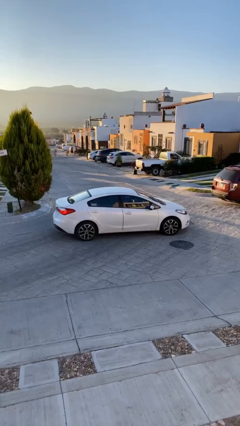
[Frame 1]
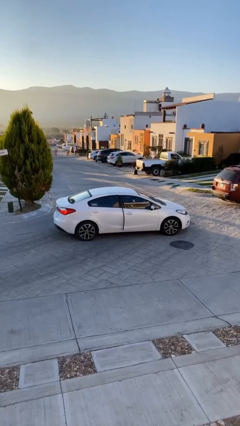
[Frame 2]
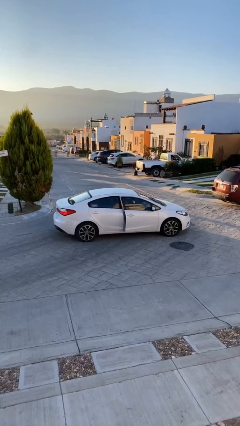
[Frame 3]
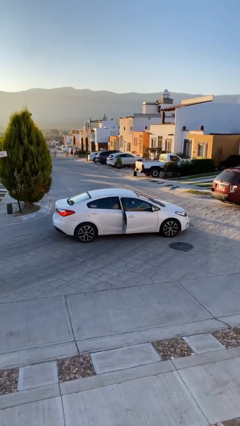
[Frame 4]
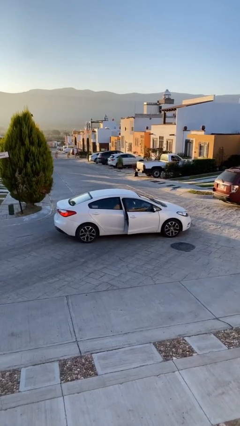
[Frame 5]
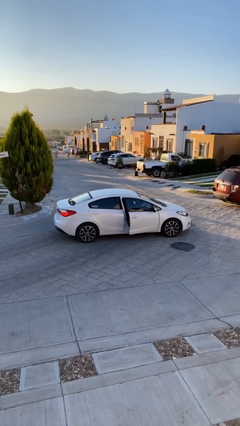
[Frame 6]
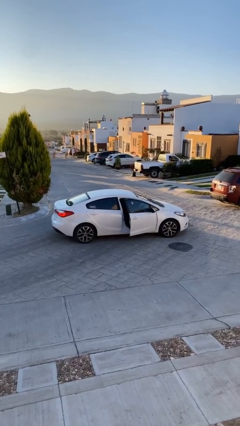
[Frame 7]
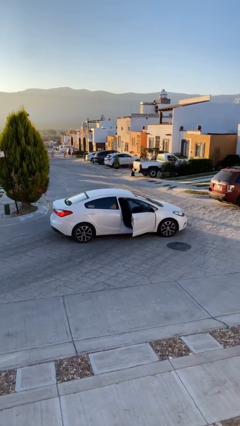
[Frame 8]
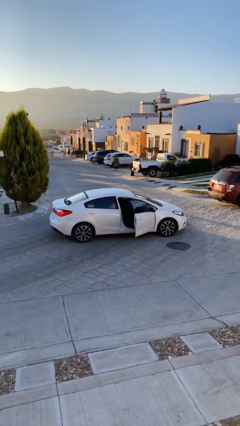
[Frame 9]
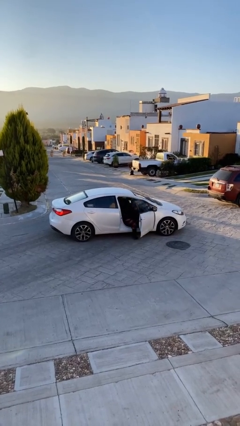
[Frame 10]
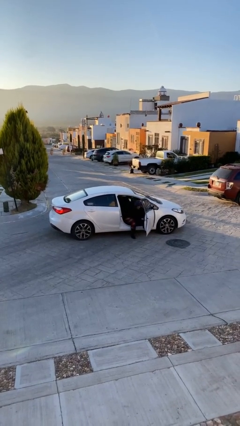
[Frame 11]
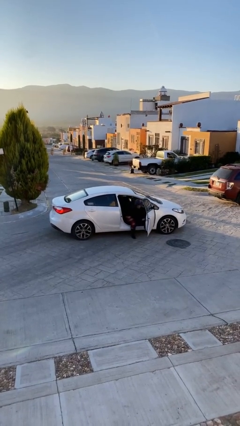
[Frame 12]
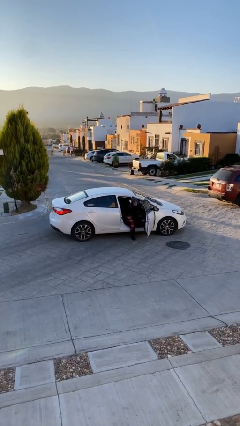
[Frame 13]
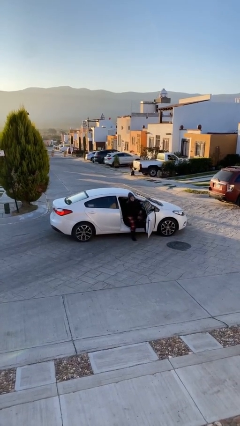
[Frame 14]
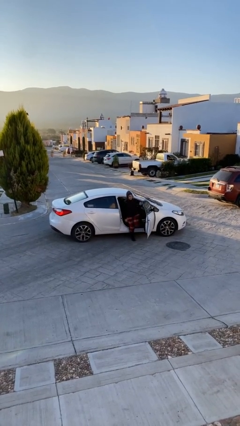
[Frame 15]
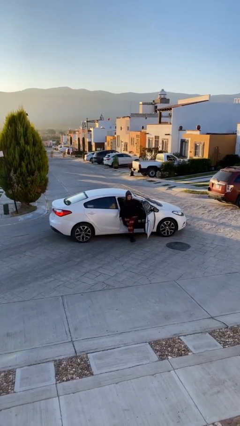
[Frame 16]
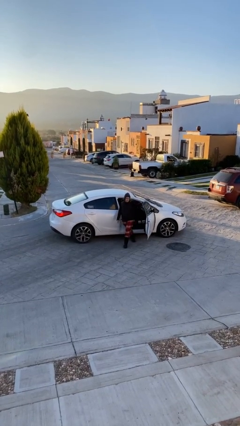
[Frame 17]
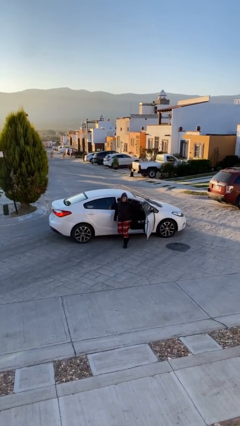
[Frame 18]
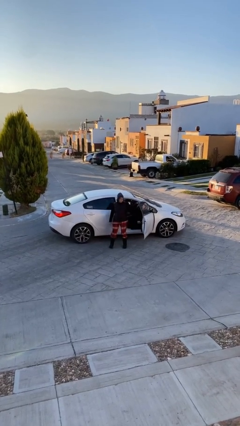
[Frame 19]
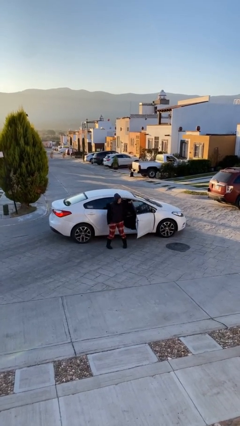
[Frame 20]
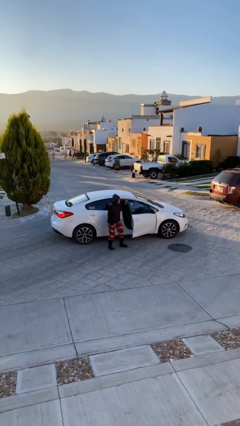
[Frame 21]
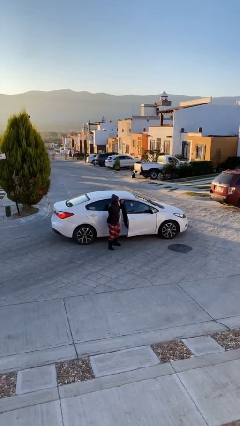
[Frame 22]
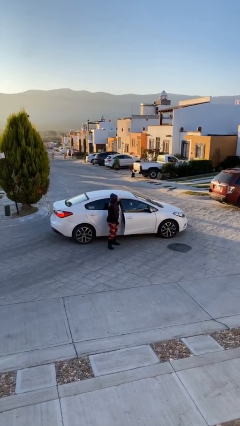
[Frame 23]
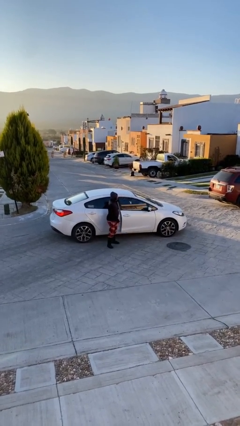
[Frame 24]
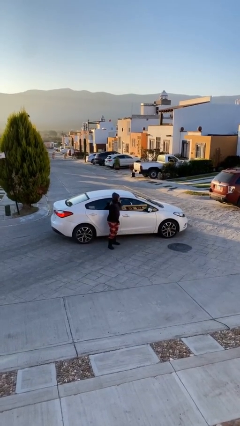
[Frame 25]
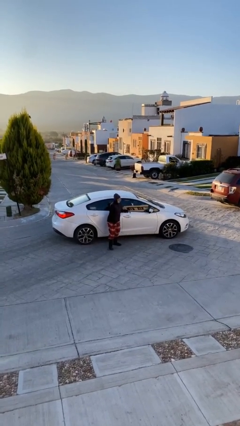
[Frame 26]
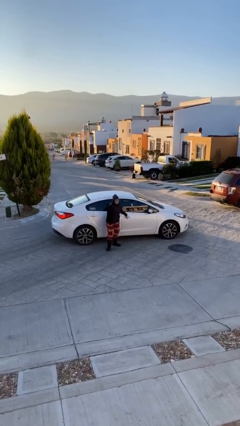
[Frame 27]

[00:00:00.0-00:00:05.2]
car drops off person

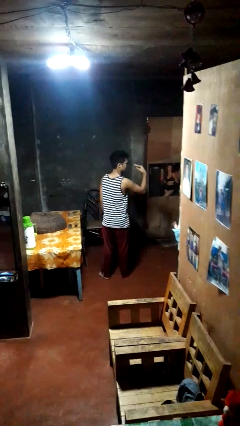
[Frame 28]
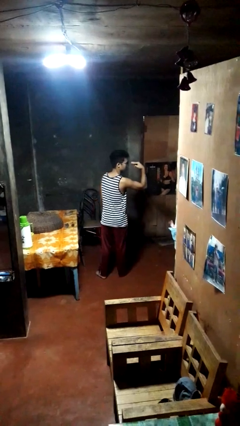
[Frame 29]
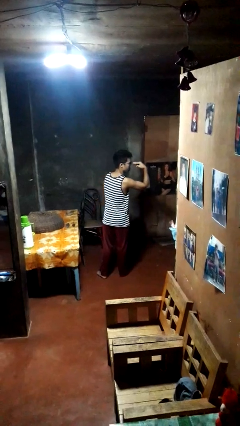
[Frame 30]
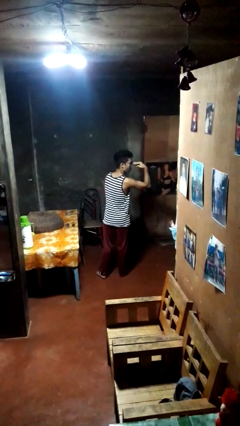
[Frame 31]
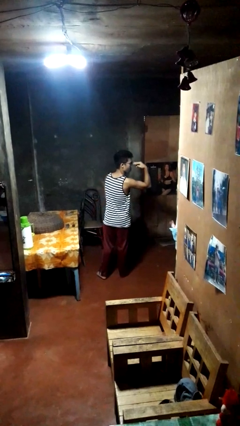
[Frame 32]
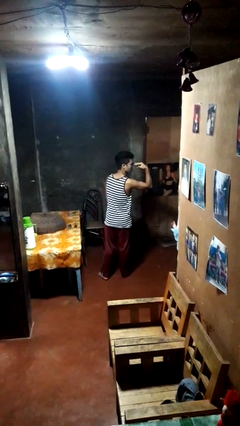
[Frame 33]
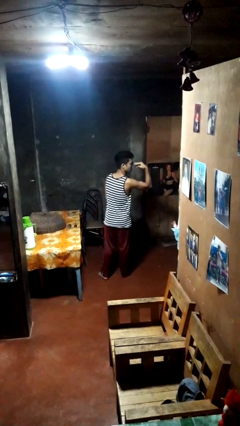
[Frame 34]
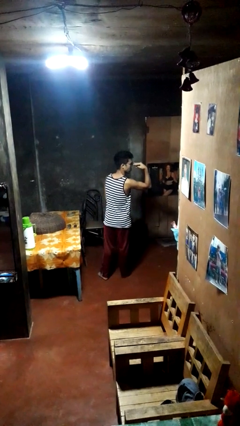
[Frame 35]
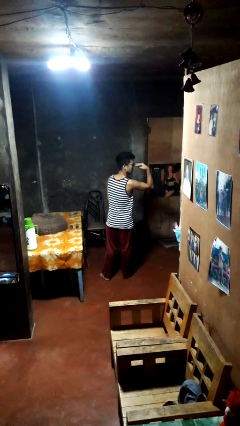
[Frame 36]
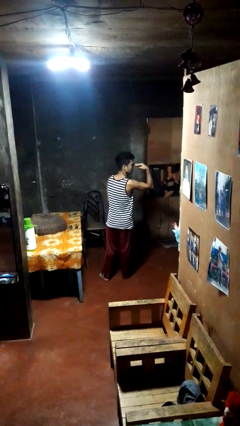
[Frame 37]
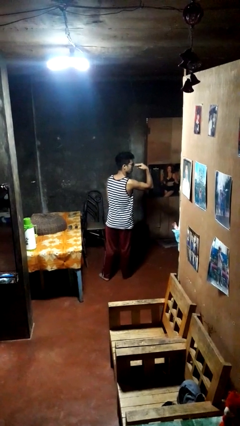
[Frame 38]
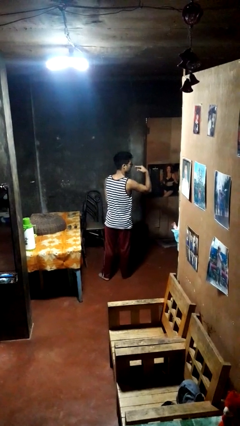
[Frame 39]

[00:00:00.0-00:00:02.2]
person gestures watch closely

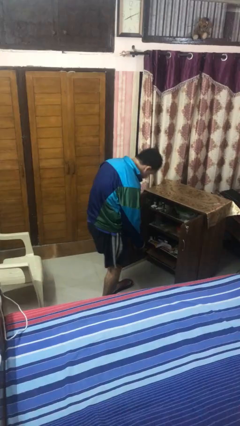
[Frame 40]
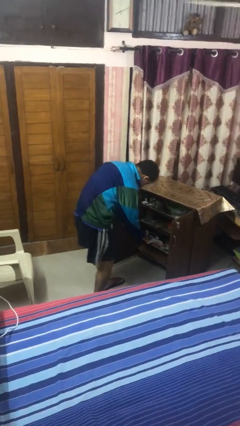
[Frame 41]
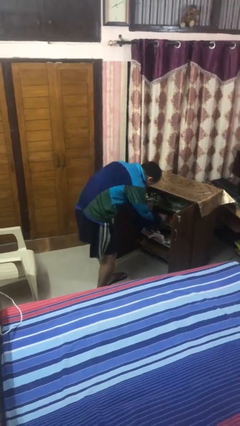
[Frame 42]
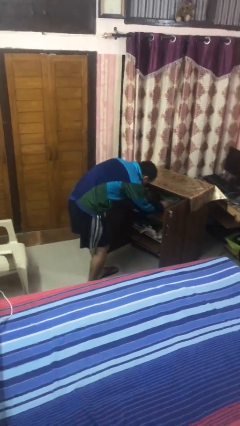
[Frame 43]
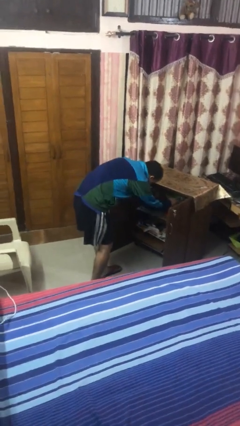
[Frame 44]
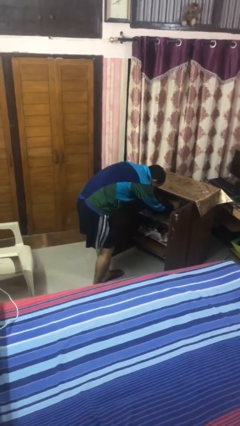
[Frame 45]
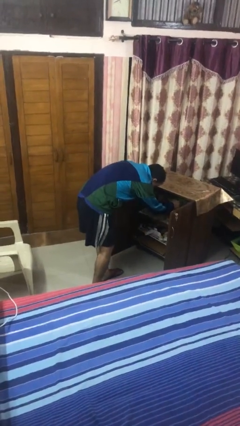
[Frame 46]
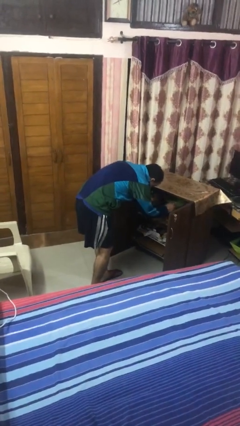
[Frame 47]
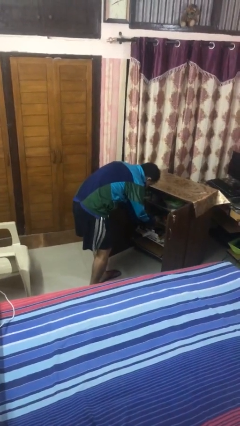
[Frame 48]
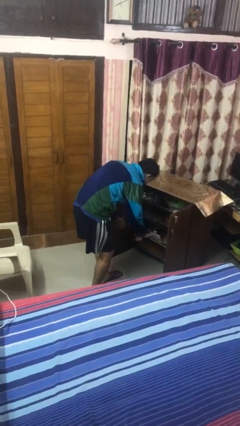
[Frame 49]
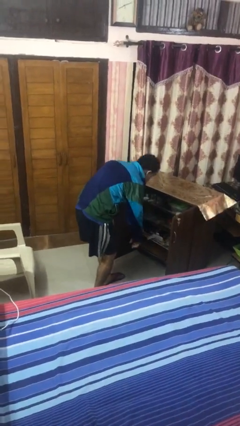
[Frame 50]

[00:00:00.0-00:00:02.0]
person searches in cabinet

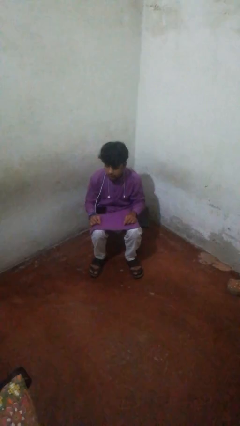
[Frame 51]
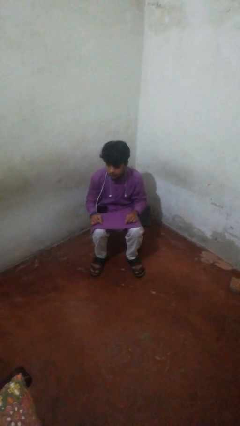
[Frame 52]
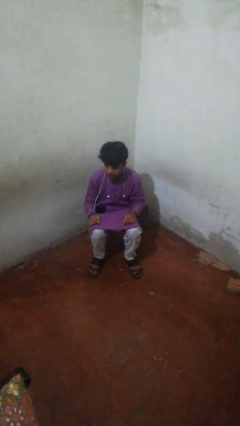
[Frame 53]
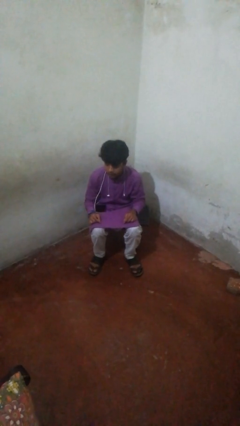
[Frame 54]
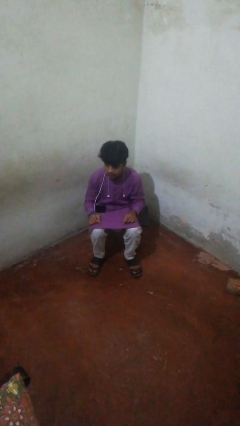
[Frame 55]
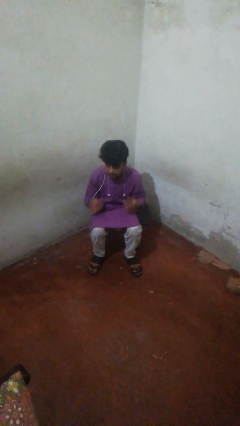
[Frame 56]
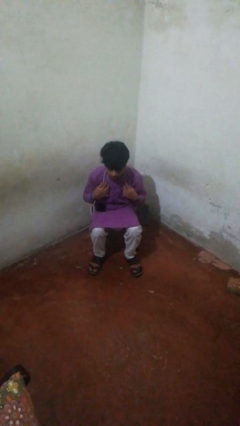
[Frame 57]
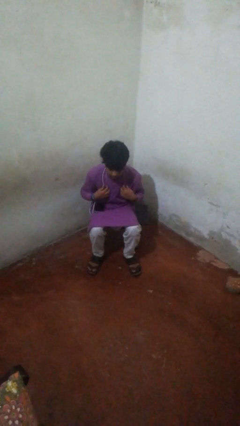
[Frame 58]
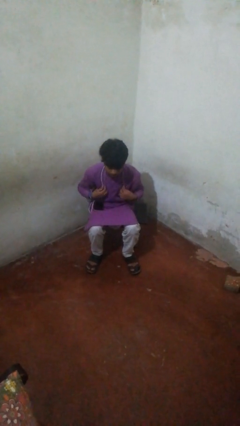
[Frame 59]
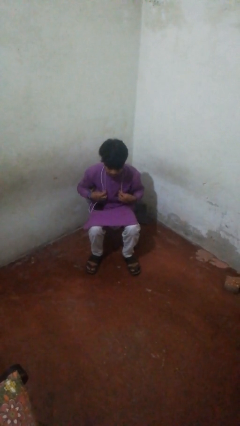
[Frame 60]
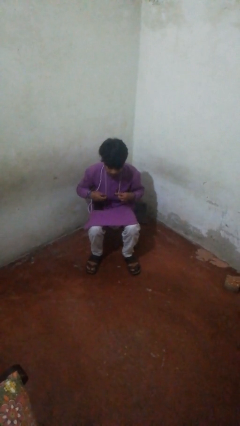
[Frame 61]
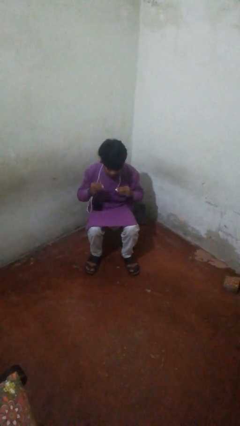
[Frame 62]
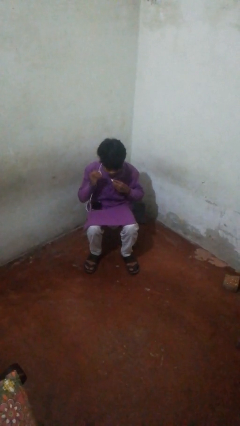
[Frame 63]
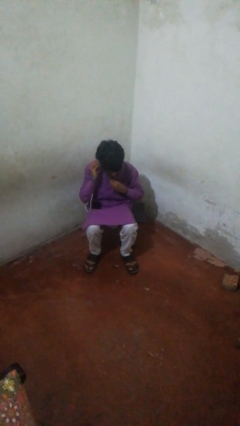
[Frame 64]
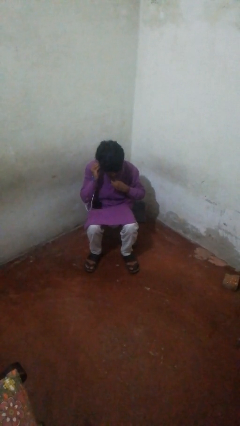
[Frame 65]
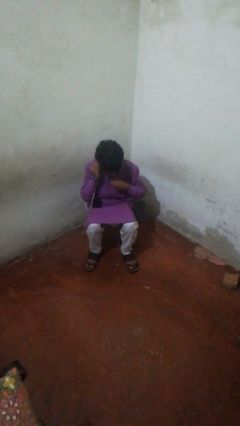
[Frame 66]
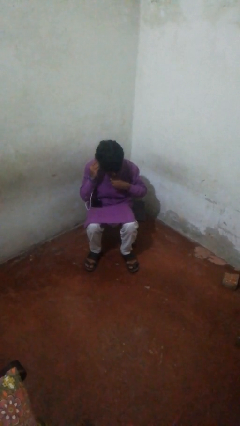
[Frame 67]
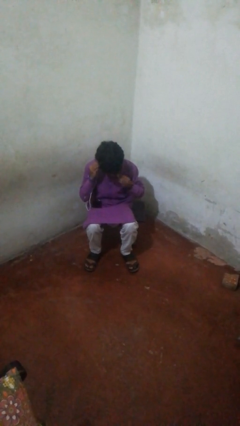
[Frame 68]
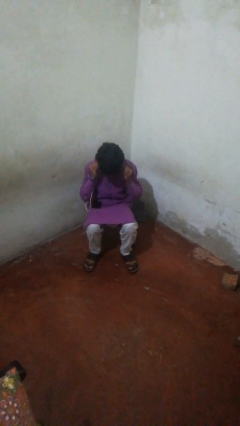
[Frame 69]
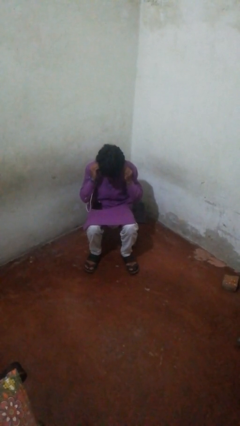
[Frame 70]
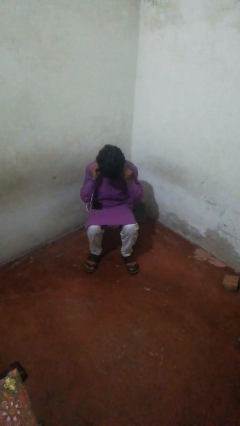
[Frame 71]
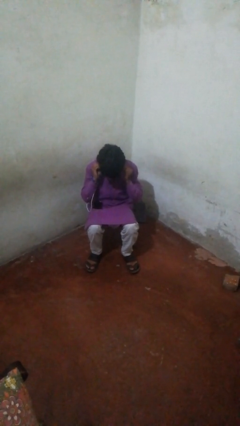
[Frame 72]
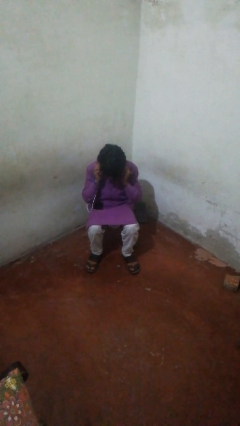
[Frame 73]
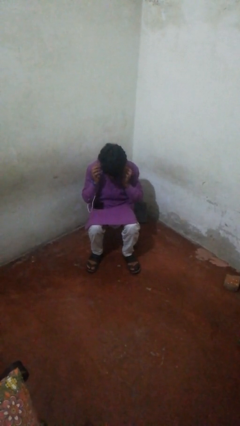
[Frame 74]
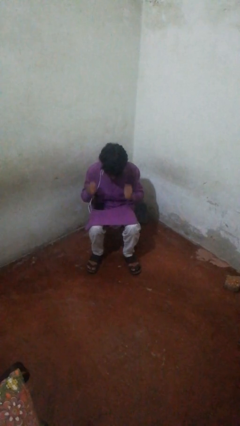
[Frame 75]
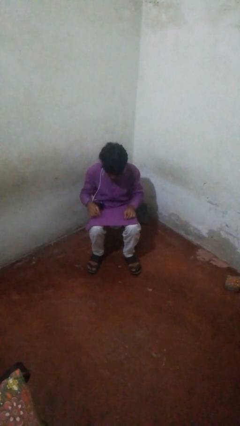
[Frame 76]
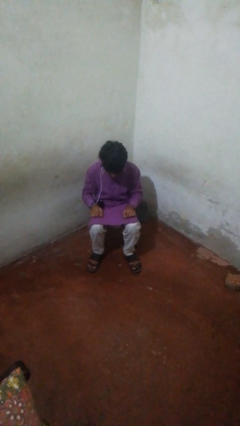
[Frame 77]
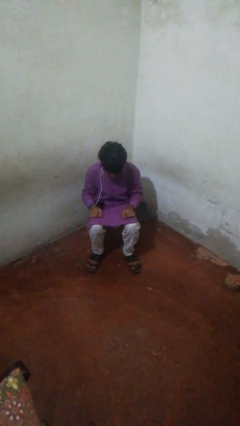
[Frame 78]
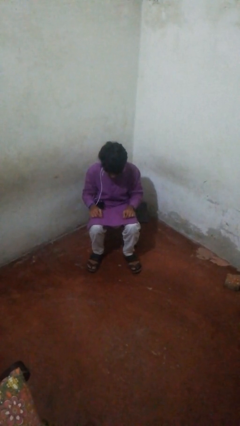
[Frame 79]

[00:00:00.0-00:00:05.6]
person puts on headphones

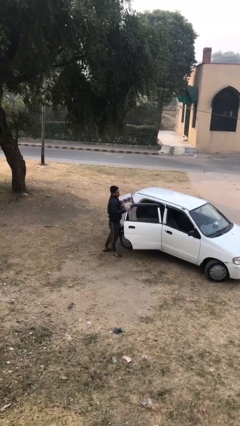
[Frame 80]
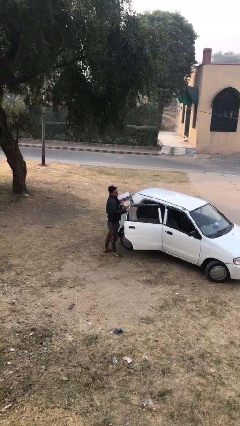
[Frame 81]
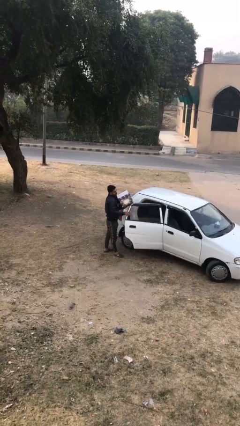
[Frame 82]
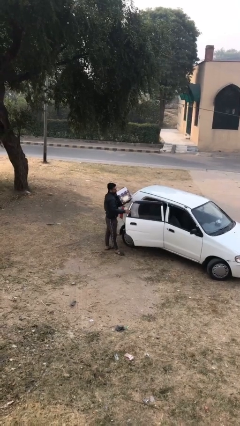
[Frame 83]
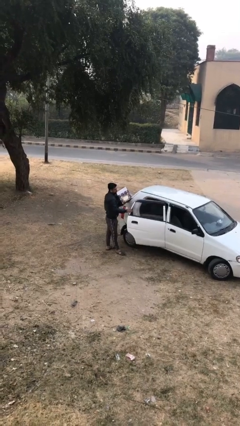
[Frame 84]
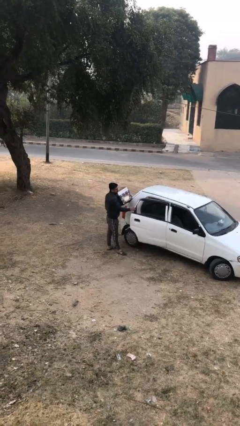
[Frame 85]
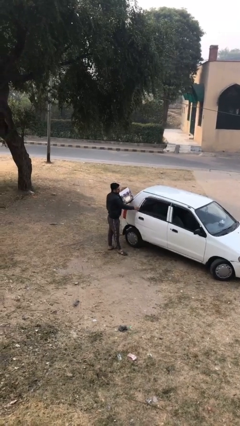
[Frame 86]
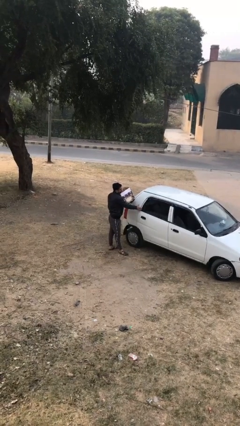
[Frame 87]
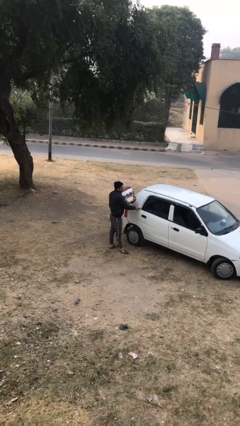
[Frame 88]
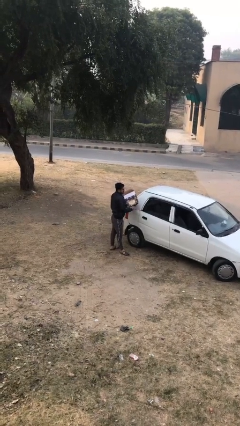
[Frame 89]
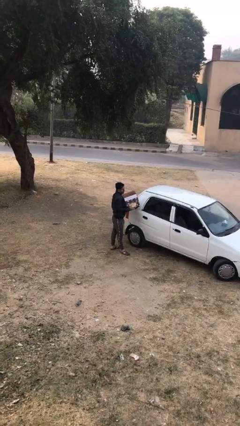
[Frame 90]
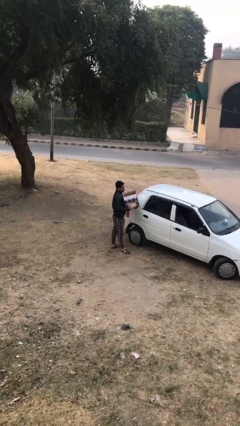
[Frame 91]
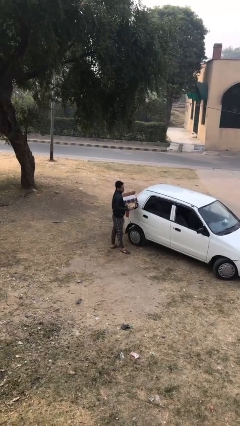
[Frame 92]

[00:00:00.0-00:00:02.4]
person closes car door
